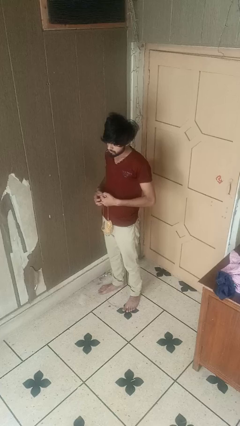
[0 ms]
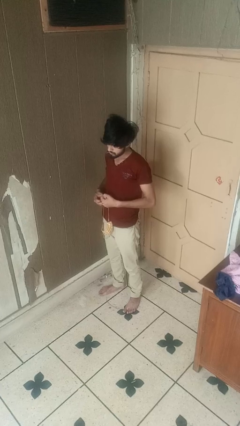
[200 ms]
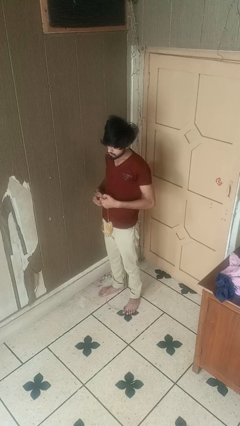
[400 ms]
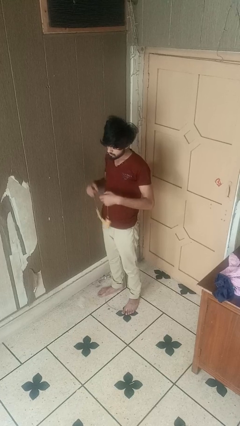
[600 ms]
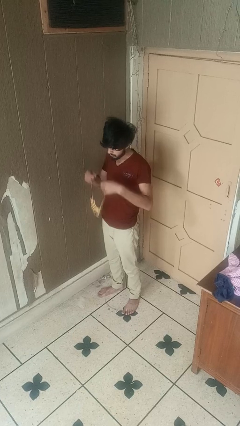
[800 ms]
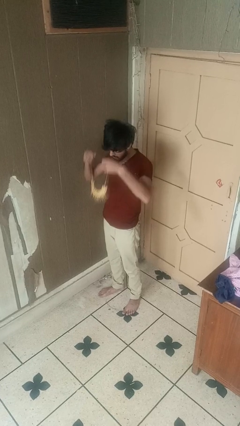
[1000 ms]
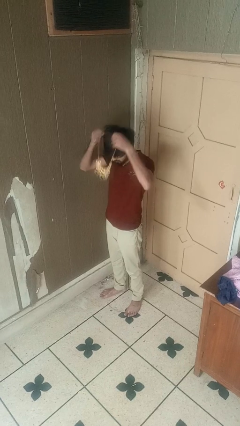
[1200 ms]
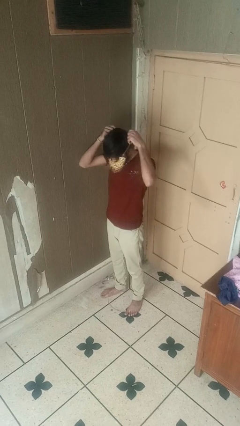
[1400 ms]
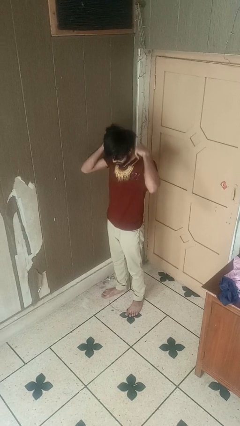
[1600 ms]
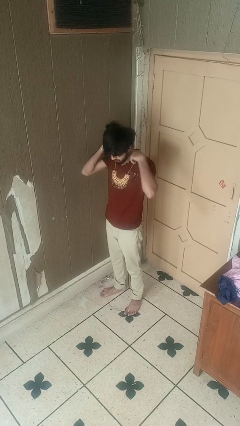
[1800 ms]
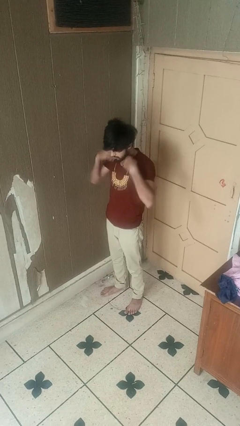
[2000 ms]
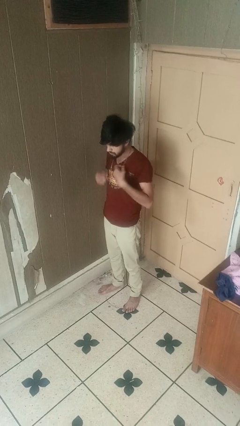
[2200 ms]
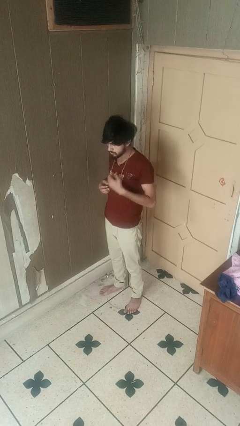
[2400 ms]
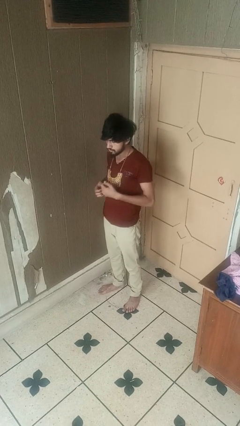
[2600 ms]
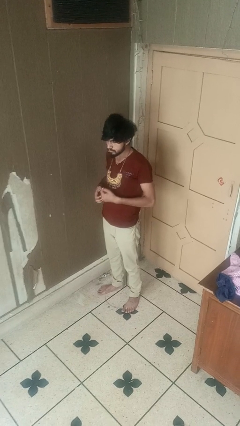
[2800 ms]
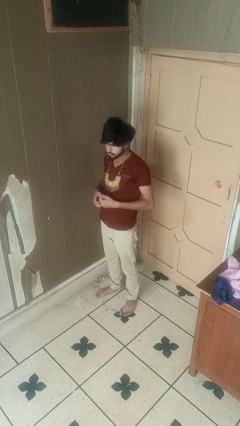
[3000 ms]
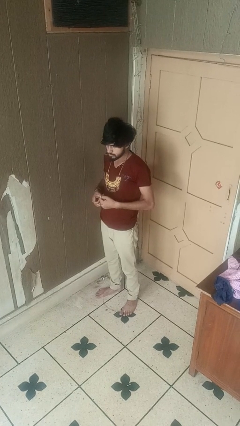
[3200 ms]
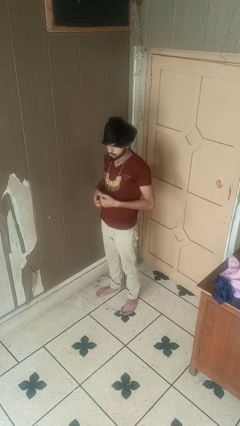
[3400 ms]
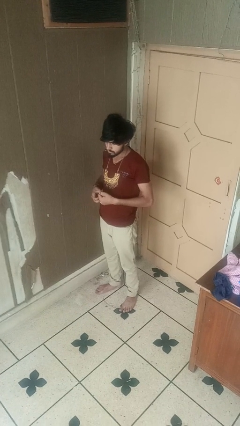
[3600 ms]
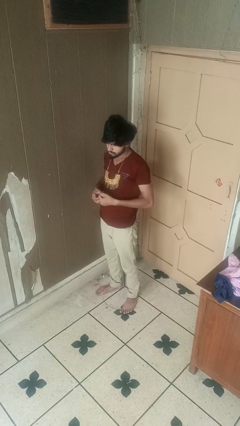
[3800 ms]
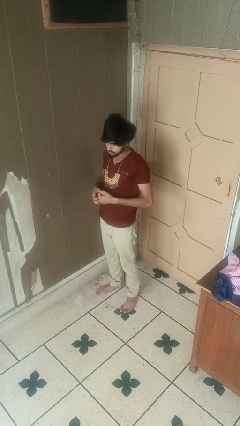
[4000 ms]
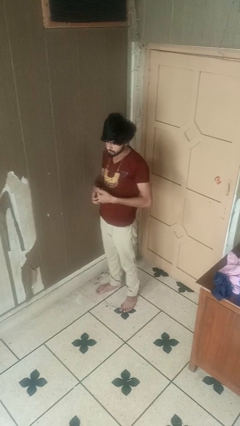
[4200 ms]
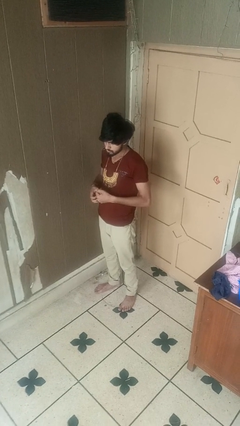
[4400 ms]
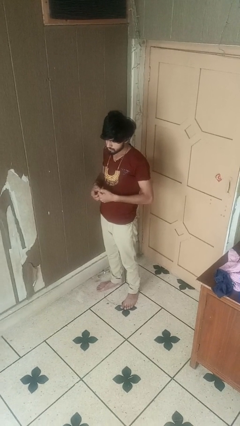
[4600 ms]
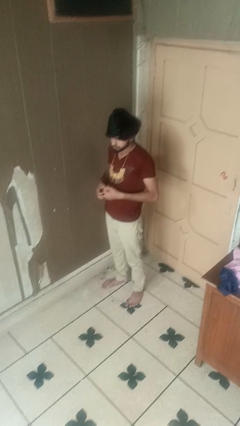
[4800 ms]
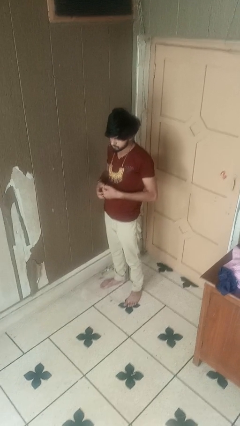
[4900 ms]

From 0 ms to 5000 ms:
person puts on necklace

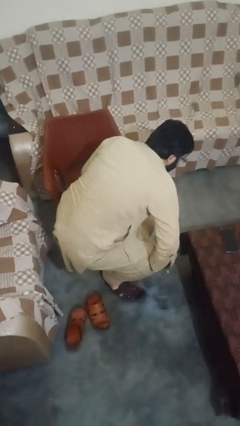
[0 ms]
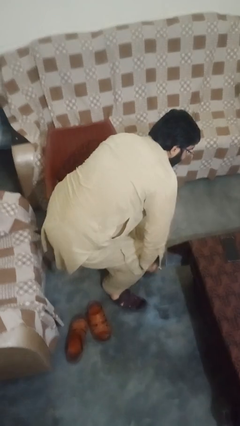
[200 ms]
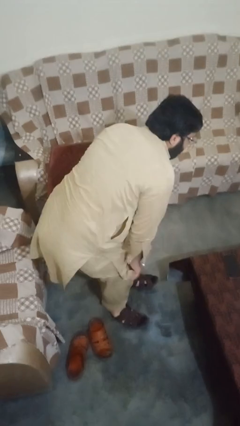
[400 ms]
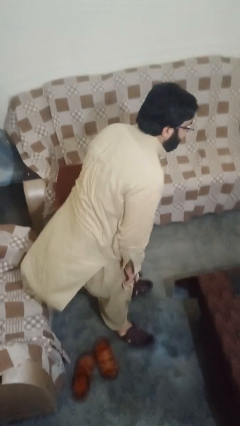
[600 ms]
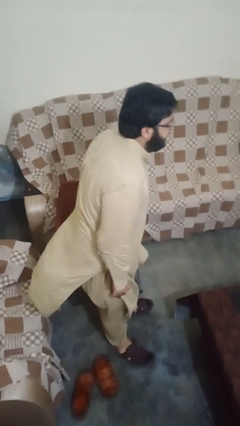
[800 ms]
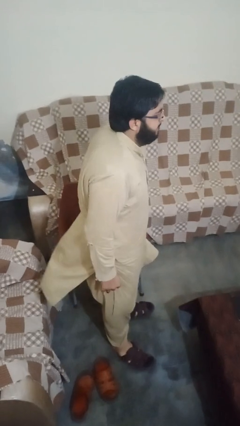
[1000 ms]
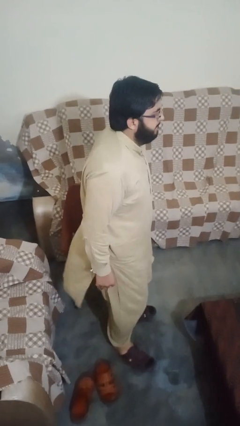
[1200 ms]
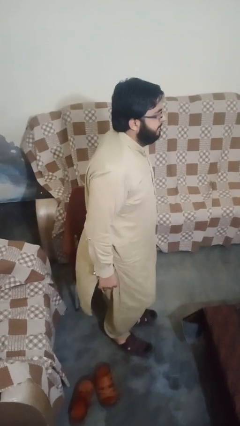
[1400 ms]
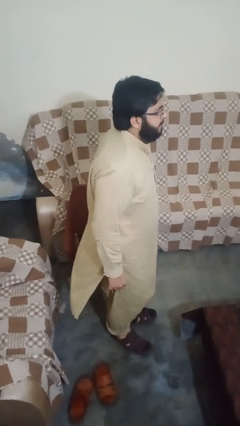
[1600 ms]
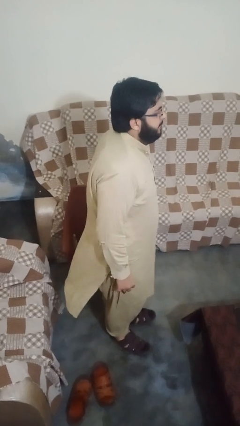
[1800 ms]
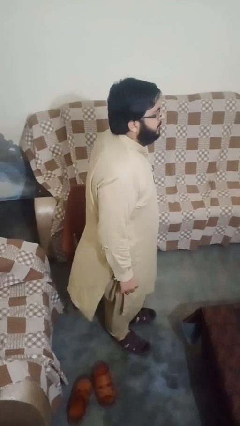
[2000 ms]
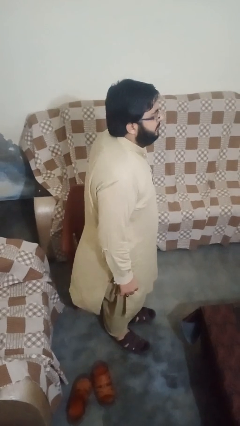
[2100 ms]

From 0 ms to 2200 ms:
person stands up from floor

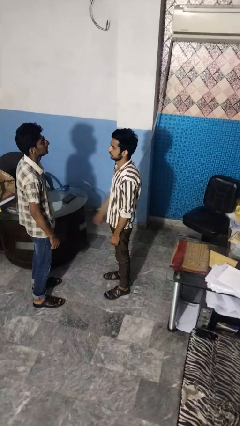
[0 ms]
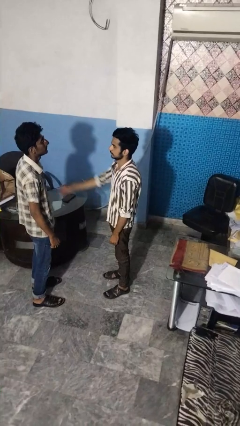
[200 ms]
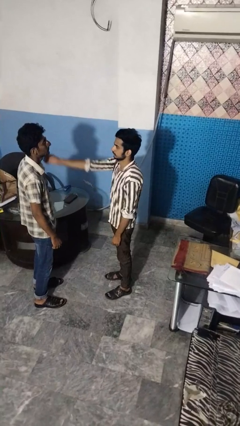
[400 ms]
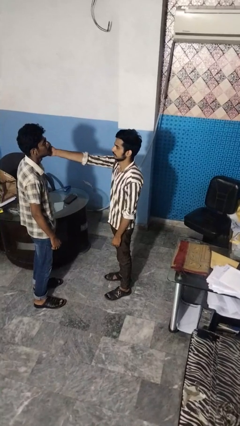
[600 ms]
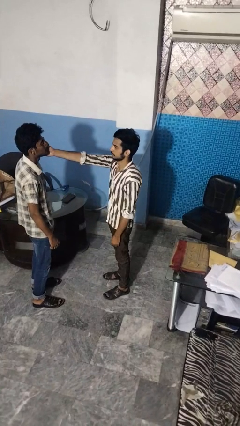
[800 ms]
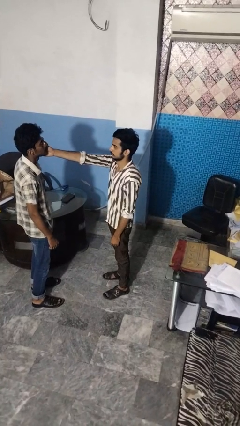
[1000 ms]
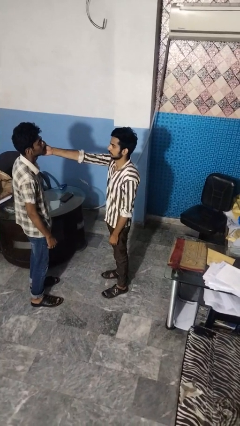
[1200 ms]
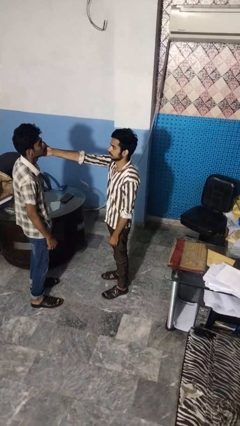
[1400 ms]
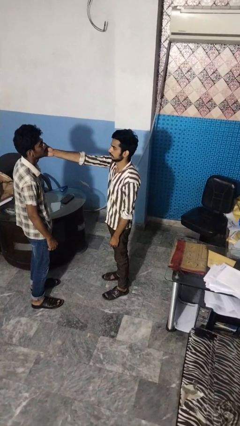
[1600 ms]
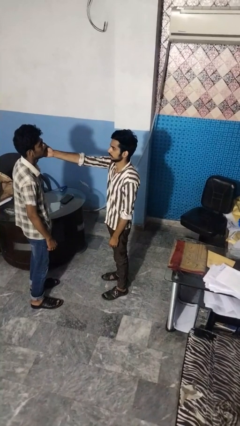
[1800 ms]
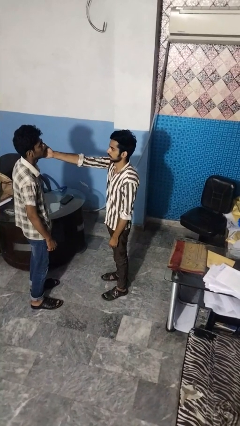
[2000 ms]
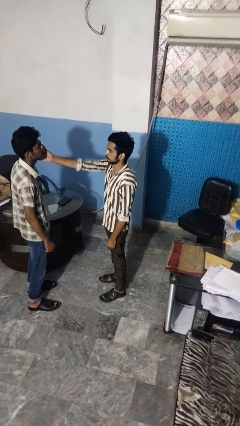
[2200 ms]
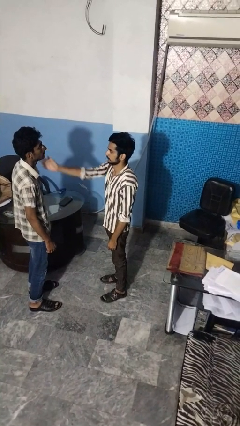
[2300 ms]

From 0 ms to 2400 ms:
person touches face of person

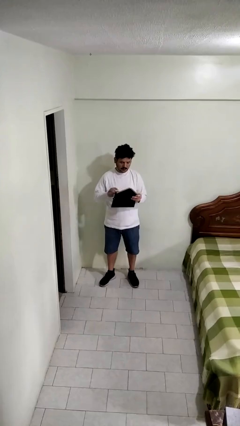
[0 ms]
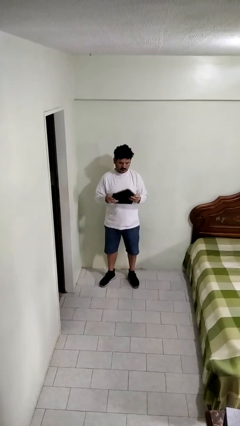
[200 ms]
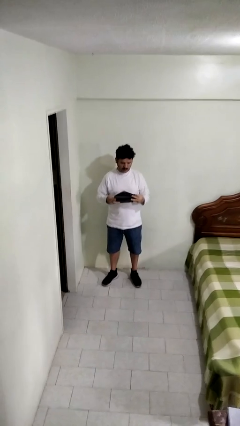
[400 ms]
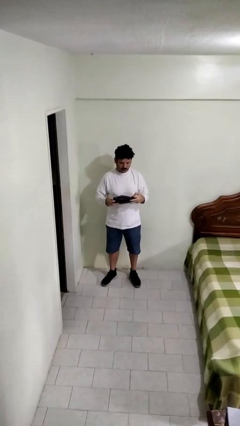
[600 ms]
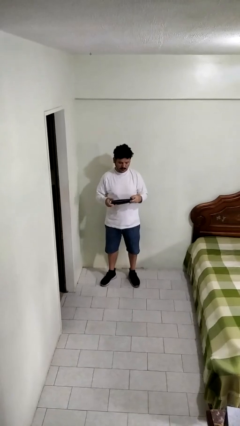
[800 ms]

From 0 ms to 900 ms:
person puts object into purse

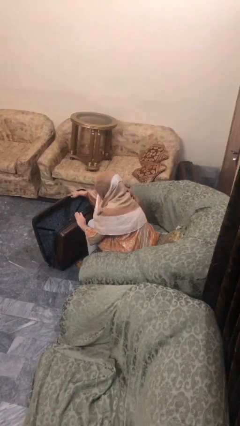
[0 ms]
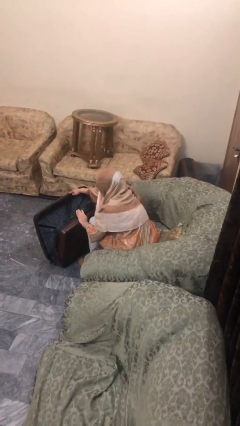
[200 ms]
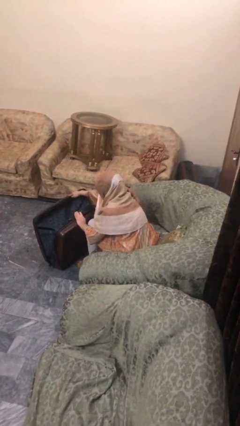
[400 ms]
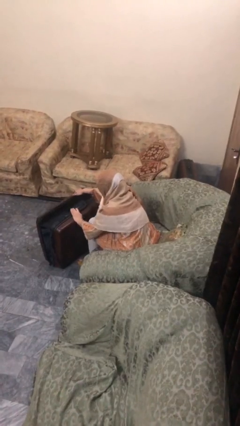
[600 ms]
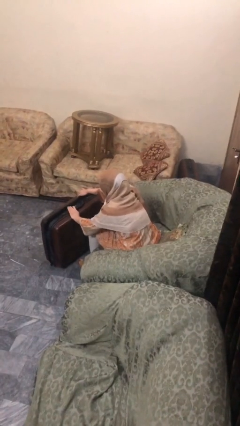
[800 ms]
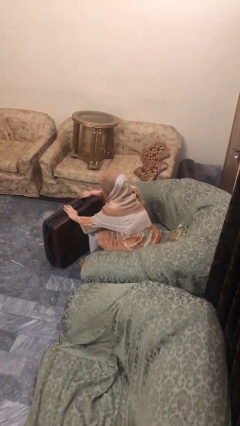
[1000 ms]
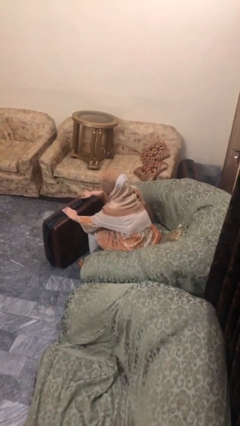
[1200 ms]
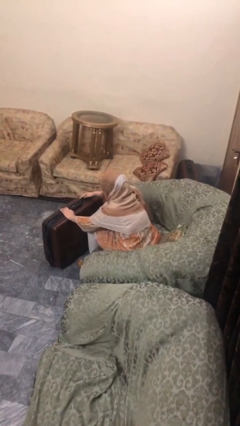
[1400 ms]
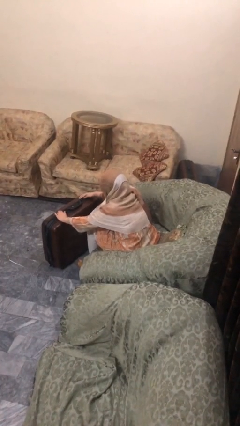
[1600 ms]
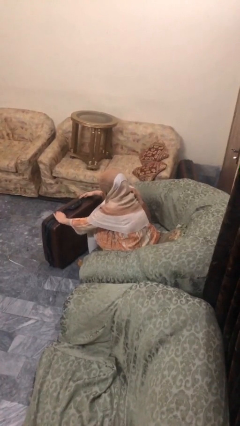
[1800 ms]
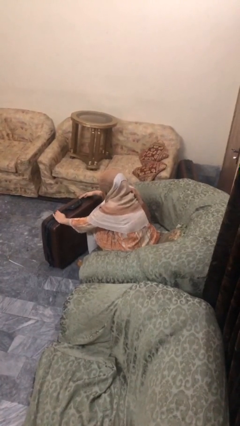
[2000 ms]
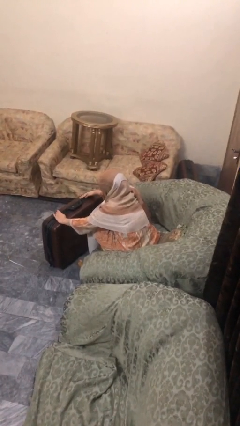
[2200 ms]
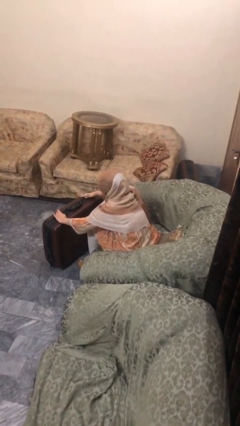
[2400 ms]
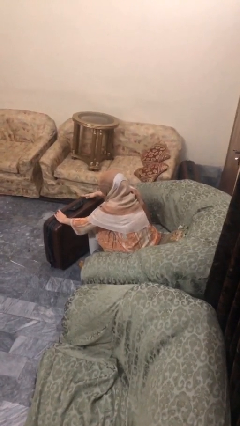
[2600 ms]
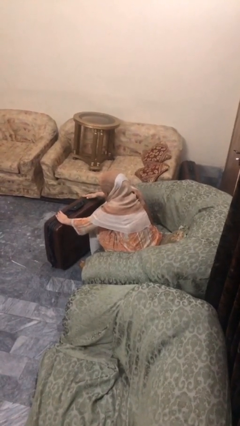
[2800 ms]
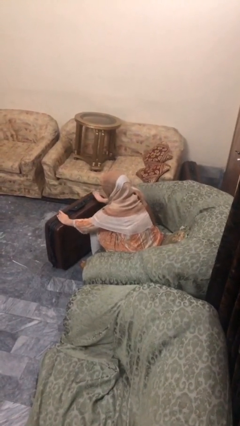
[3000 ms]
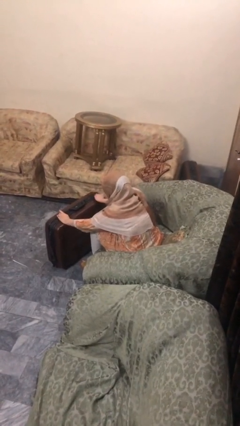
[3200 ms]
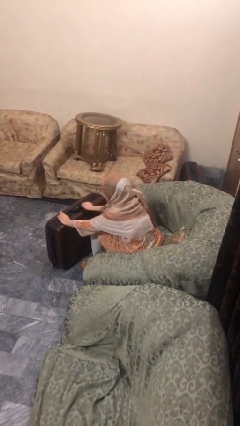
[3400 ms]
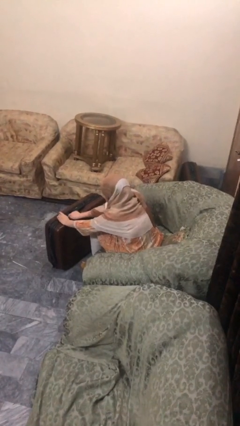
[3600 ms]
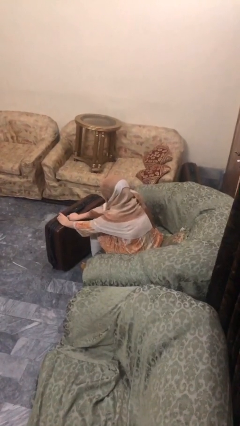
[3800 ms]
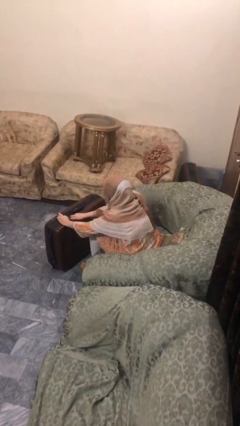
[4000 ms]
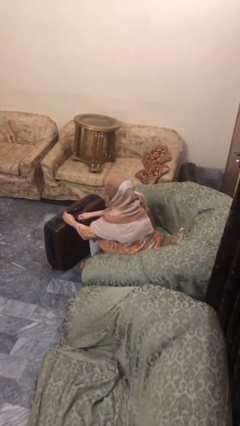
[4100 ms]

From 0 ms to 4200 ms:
person closes suitcase

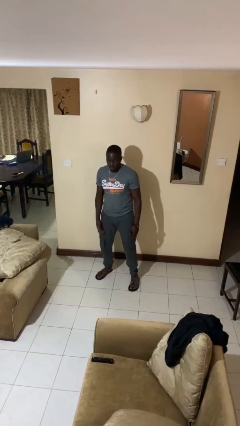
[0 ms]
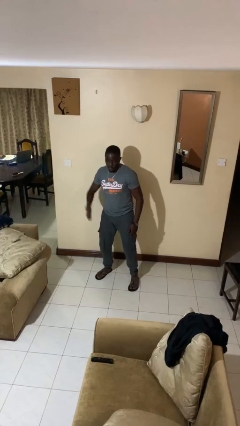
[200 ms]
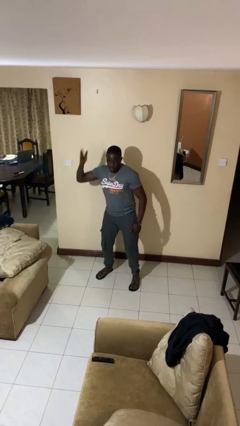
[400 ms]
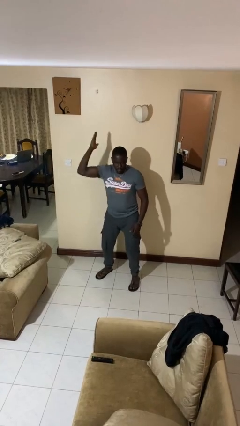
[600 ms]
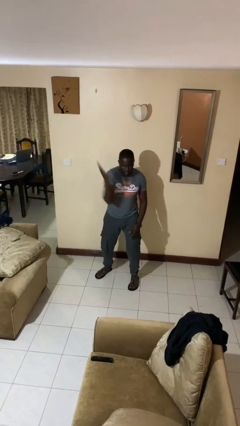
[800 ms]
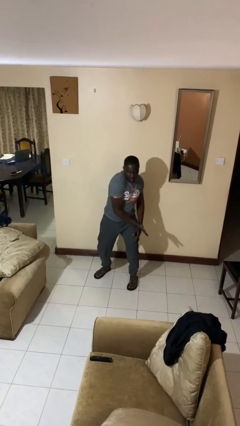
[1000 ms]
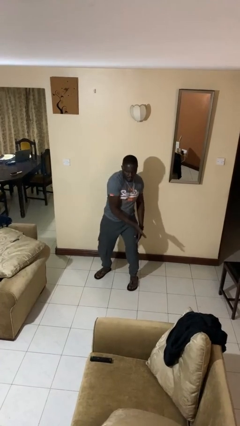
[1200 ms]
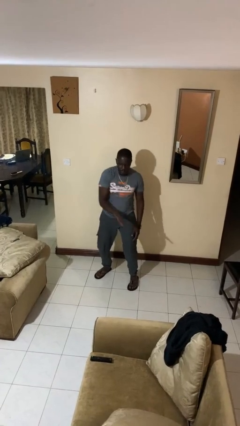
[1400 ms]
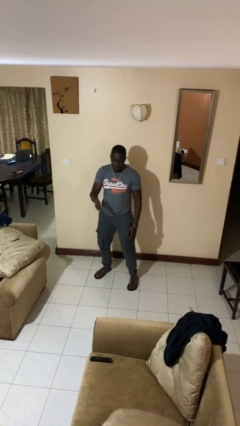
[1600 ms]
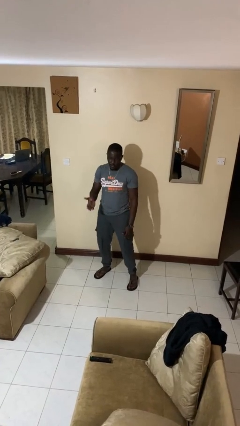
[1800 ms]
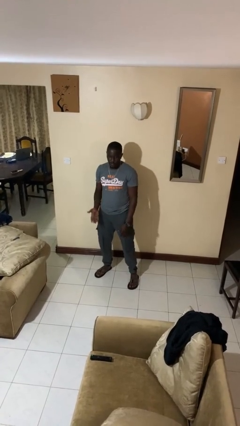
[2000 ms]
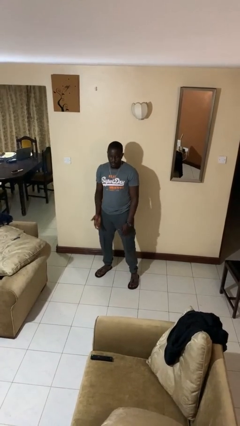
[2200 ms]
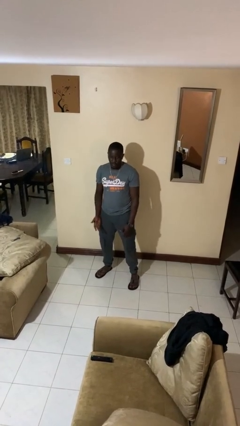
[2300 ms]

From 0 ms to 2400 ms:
person karate chop
